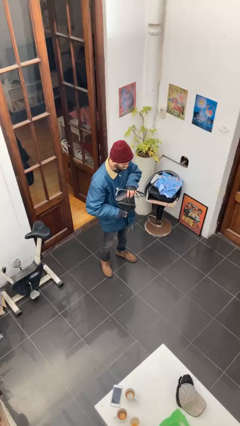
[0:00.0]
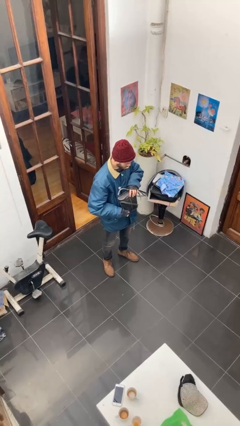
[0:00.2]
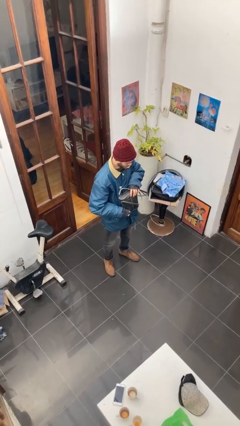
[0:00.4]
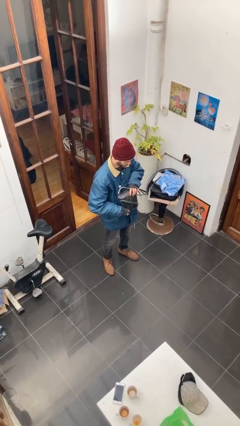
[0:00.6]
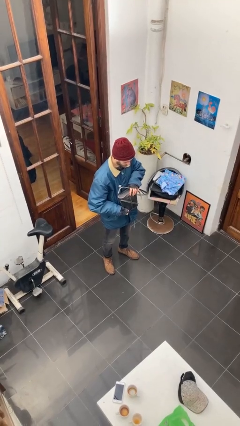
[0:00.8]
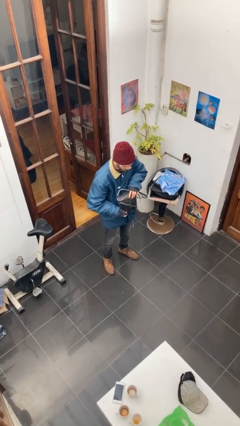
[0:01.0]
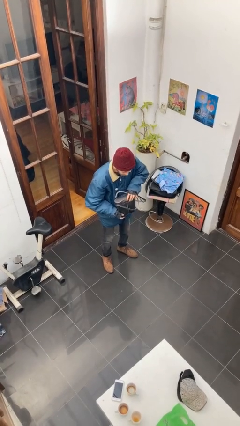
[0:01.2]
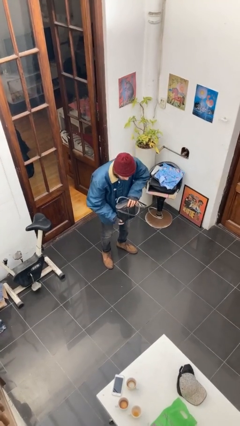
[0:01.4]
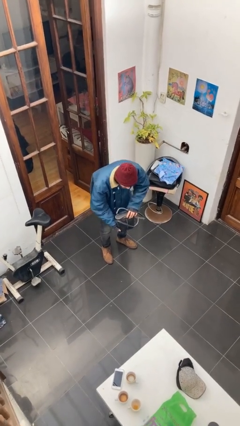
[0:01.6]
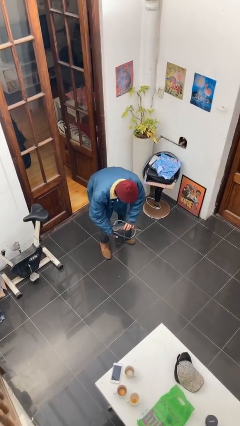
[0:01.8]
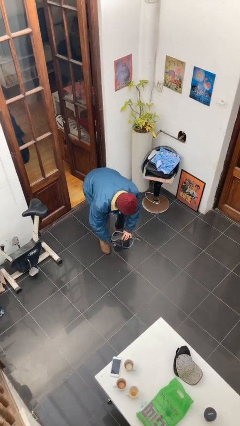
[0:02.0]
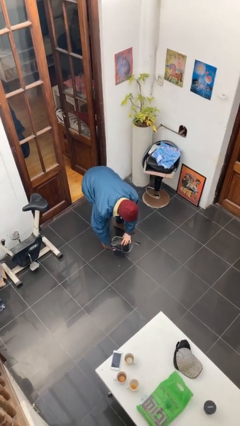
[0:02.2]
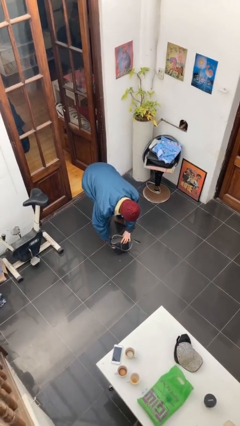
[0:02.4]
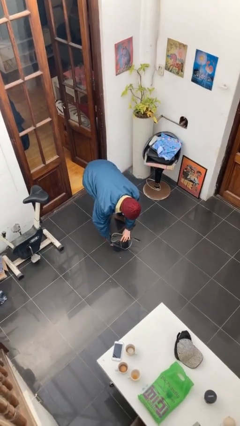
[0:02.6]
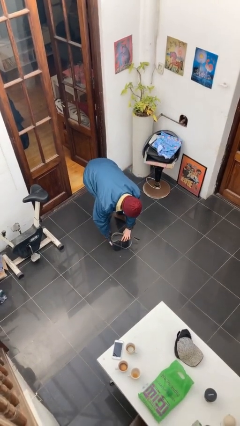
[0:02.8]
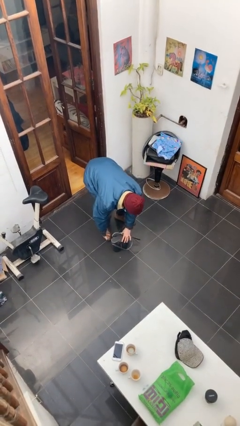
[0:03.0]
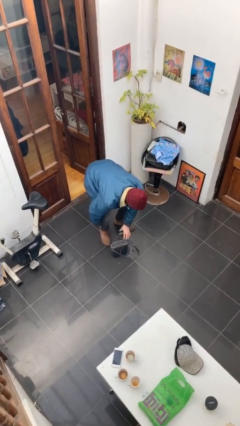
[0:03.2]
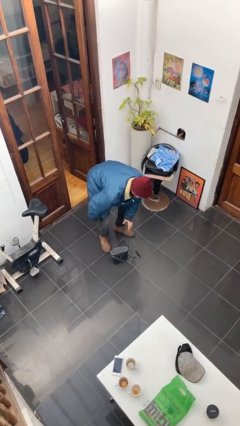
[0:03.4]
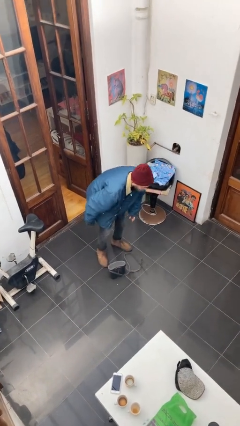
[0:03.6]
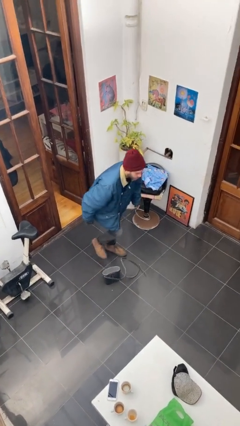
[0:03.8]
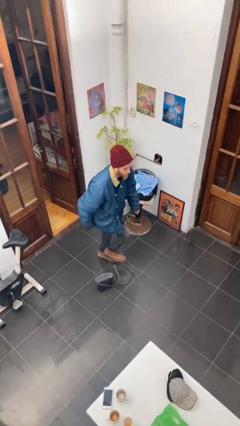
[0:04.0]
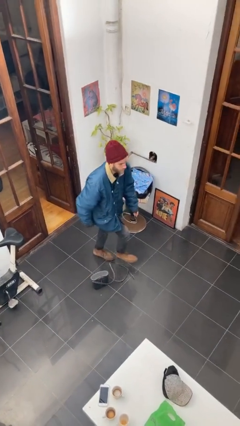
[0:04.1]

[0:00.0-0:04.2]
person puts down object on floor

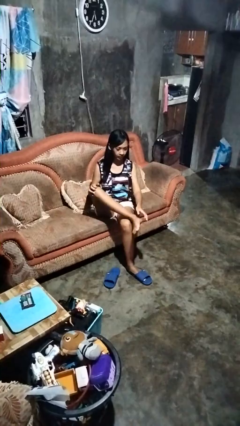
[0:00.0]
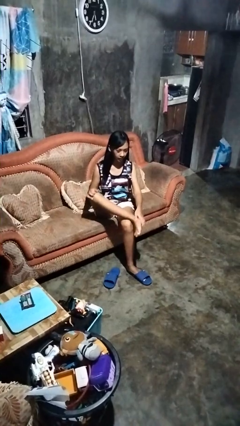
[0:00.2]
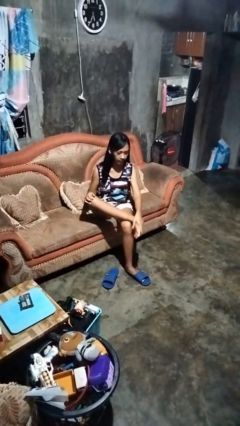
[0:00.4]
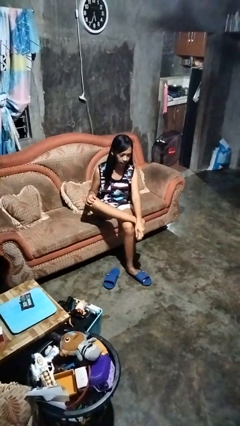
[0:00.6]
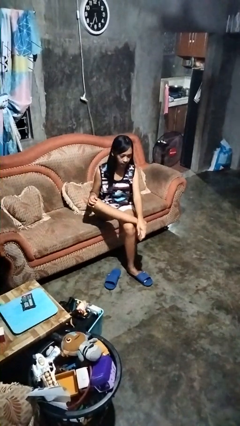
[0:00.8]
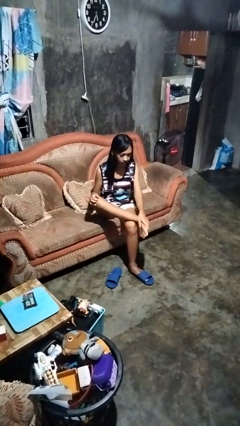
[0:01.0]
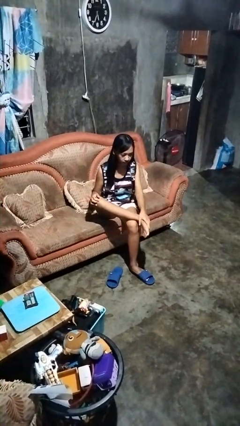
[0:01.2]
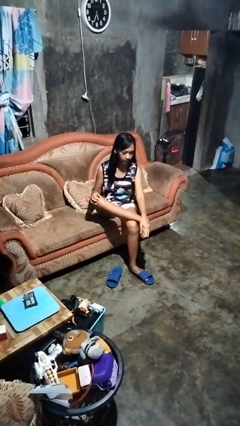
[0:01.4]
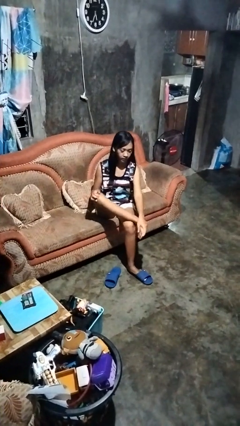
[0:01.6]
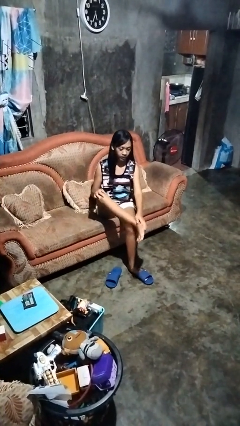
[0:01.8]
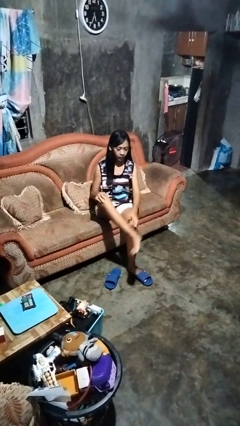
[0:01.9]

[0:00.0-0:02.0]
person rubs foot

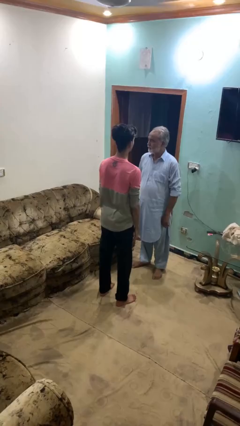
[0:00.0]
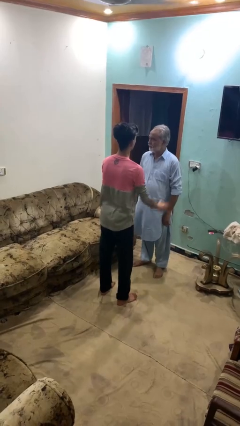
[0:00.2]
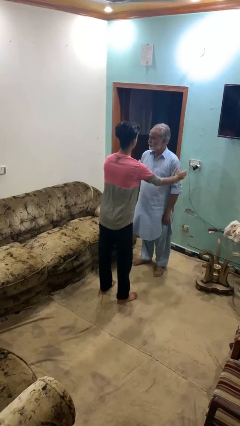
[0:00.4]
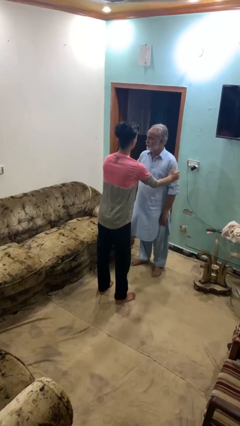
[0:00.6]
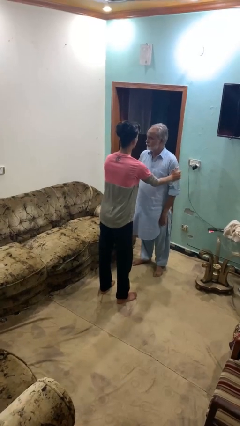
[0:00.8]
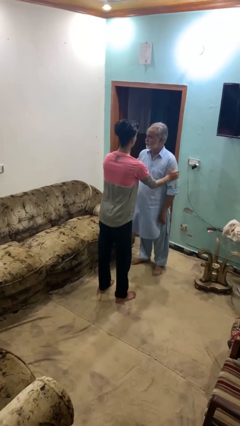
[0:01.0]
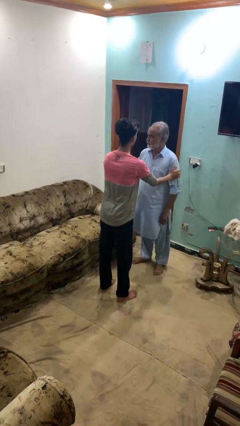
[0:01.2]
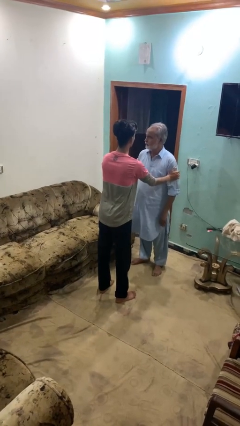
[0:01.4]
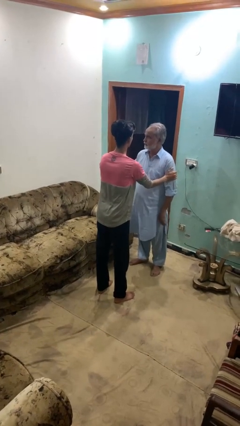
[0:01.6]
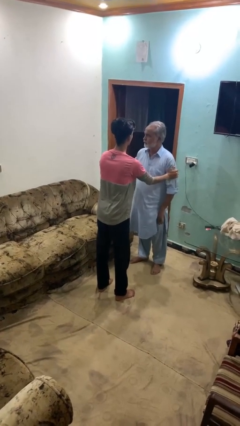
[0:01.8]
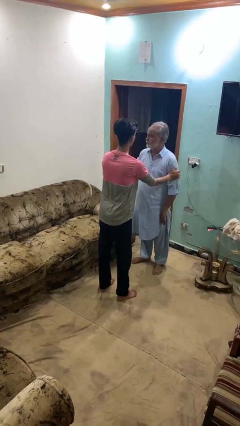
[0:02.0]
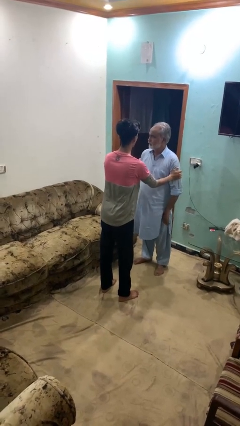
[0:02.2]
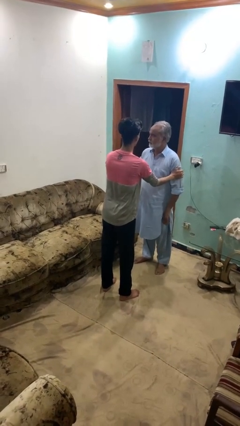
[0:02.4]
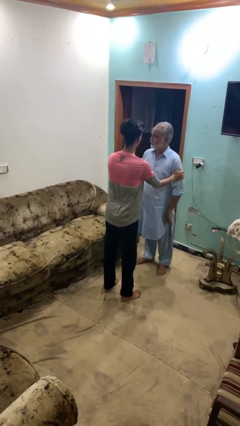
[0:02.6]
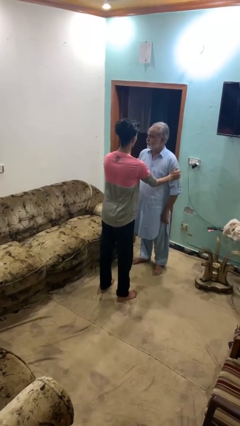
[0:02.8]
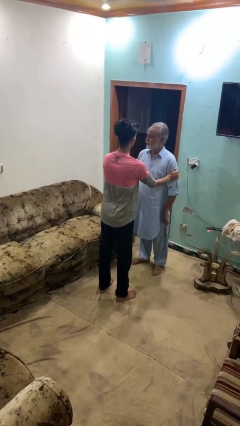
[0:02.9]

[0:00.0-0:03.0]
person grabs person by bicep

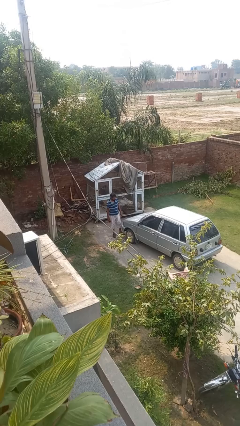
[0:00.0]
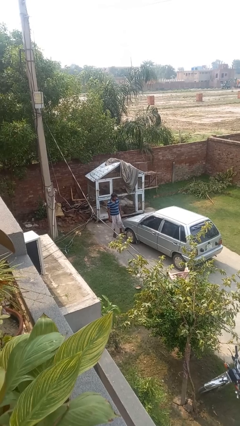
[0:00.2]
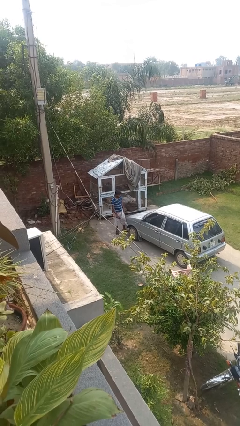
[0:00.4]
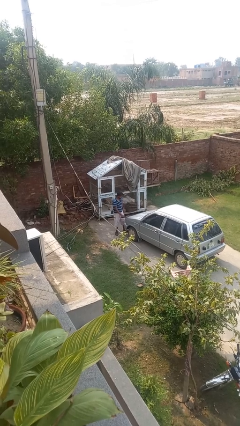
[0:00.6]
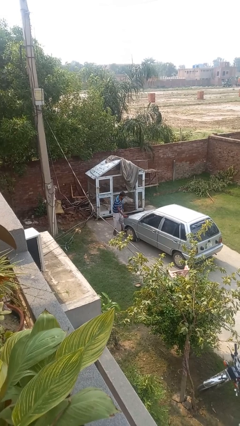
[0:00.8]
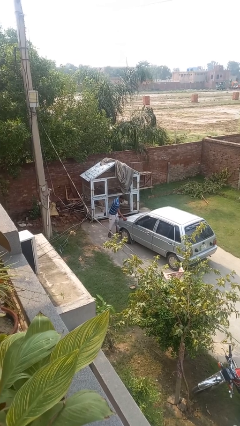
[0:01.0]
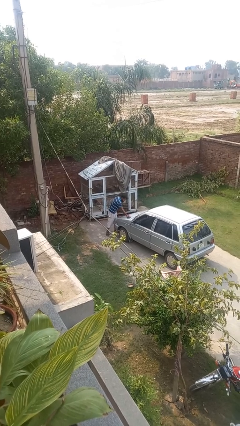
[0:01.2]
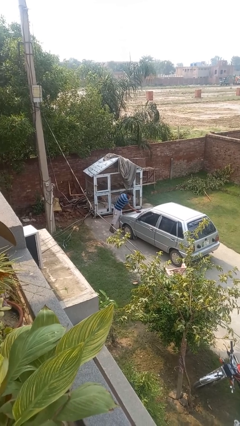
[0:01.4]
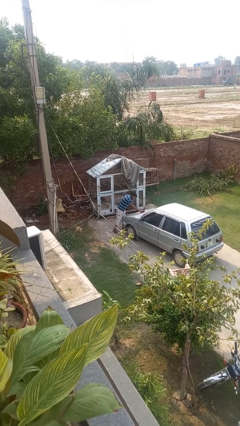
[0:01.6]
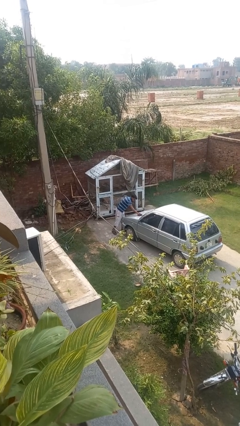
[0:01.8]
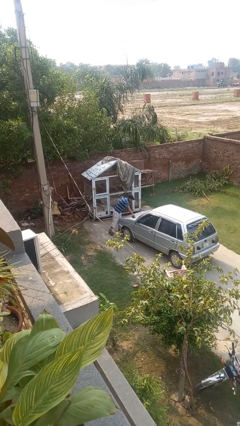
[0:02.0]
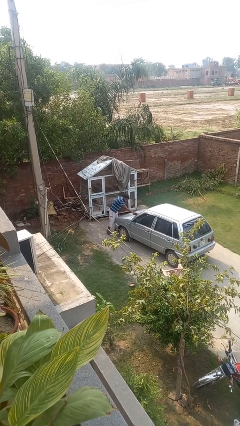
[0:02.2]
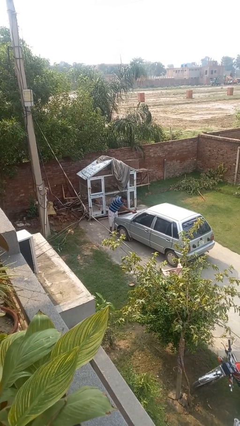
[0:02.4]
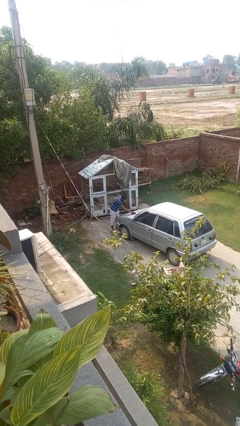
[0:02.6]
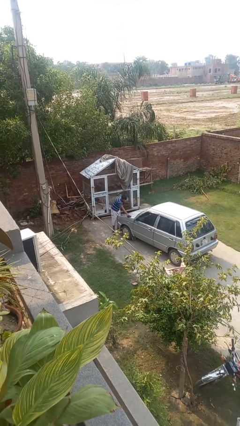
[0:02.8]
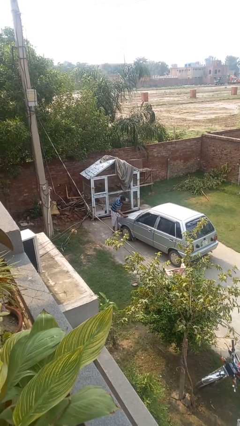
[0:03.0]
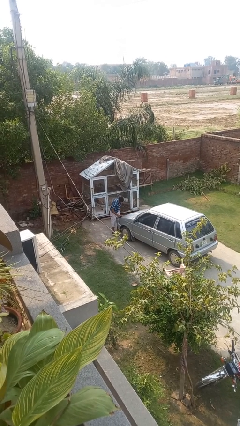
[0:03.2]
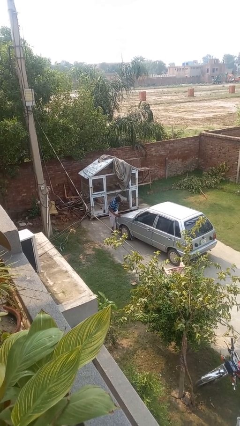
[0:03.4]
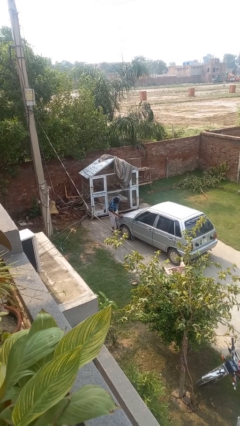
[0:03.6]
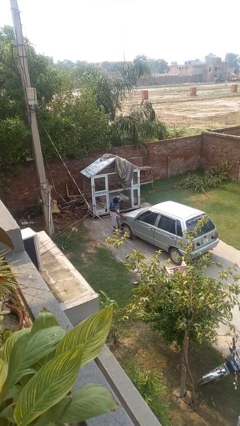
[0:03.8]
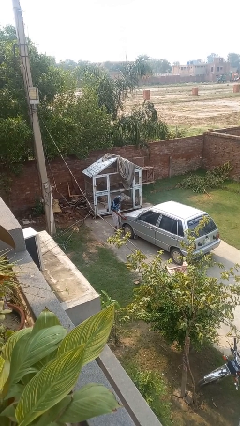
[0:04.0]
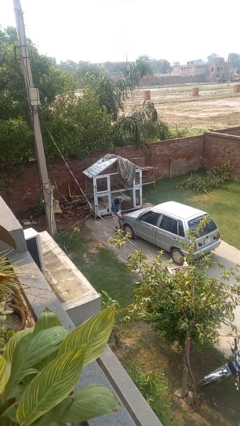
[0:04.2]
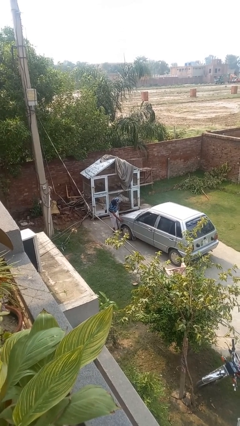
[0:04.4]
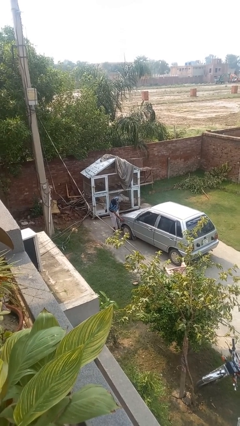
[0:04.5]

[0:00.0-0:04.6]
person polishes car with rag

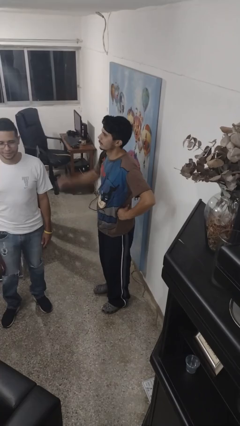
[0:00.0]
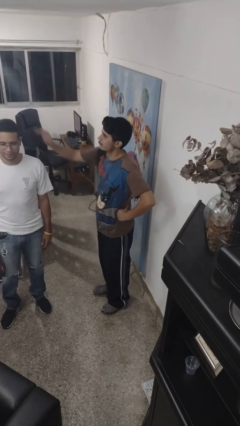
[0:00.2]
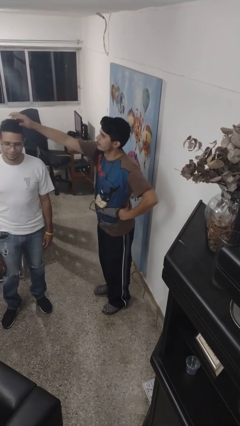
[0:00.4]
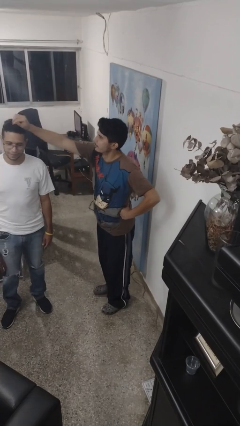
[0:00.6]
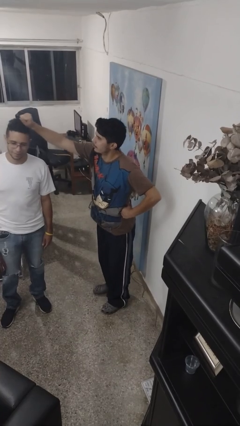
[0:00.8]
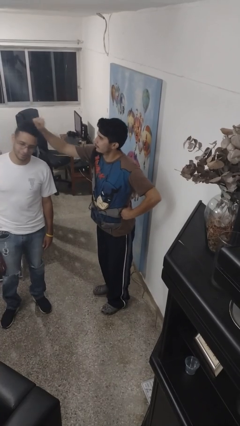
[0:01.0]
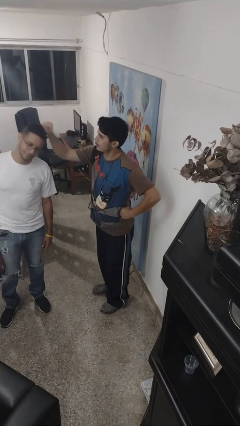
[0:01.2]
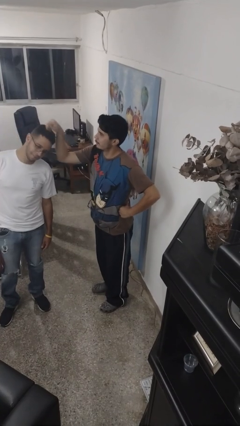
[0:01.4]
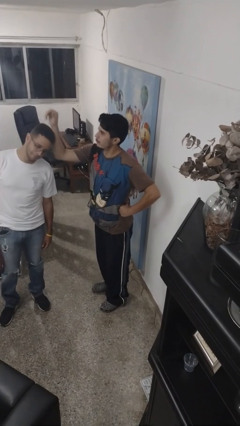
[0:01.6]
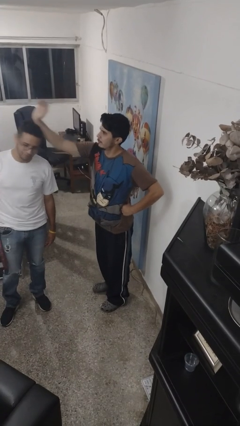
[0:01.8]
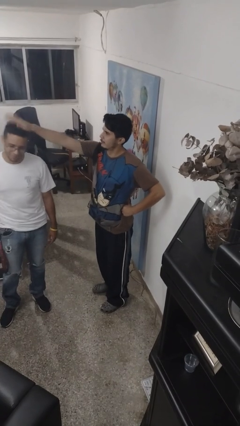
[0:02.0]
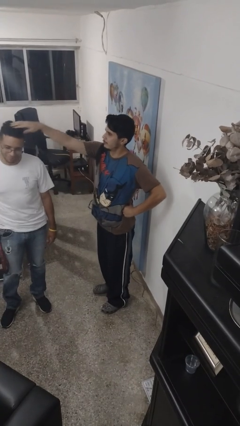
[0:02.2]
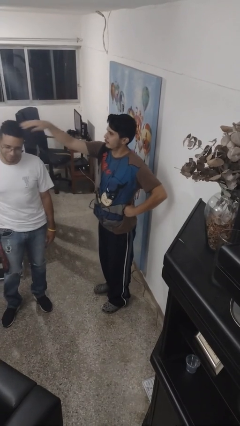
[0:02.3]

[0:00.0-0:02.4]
person grabs person by hair

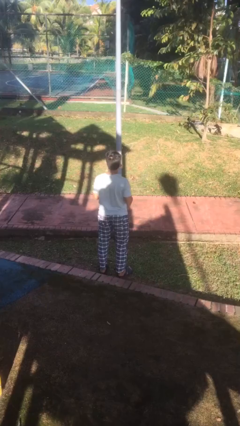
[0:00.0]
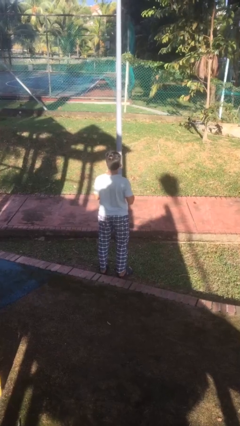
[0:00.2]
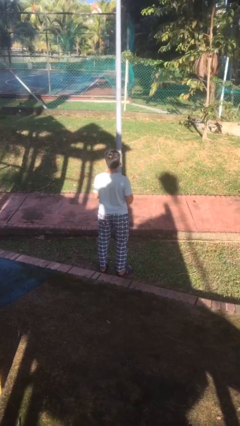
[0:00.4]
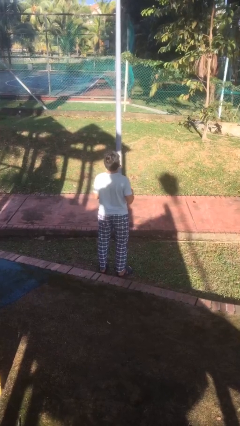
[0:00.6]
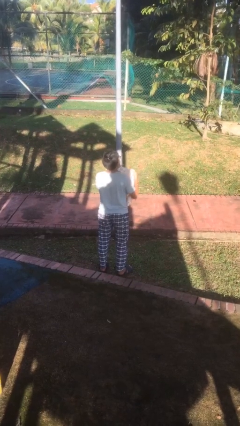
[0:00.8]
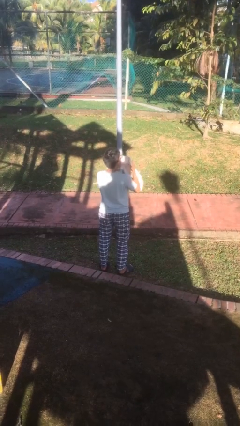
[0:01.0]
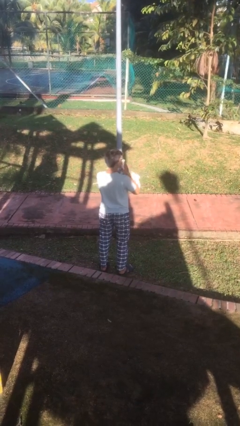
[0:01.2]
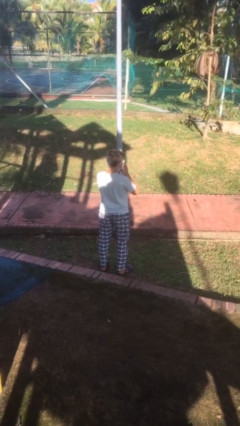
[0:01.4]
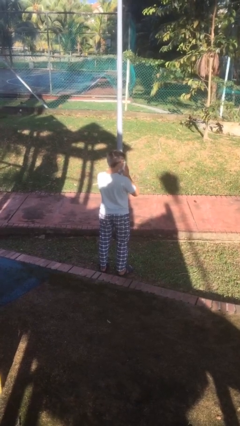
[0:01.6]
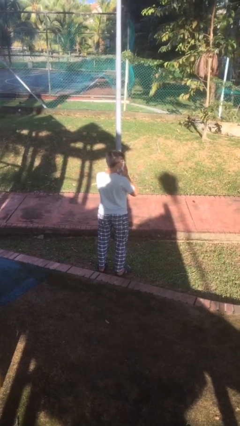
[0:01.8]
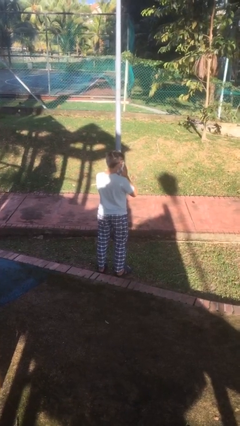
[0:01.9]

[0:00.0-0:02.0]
person blows nose
